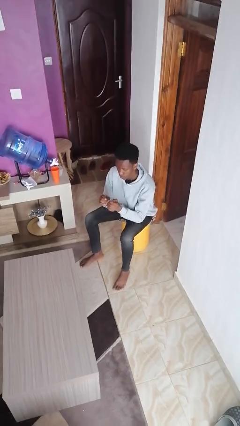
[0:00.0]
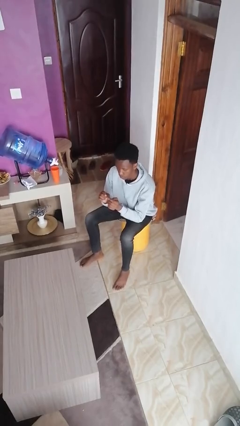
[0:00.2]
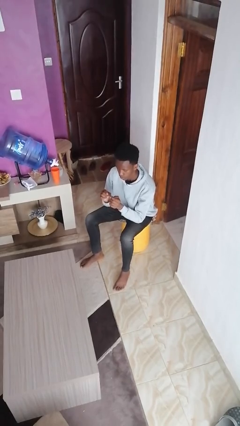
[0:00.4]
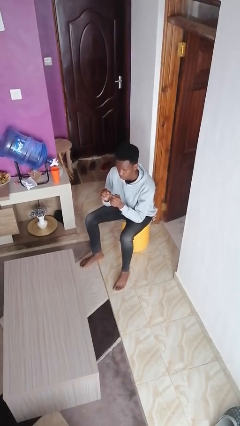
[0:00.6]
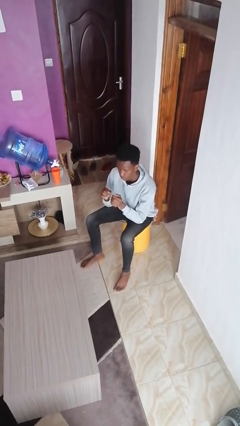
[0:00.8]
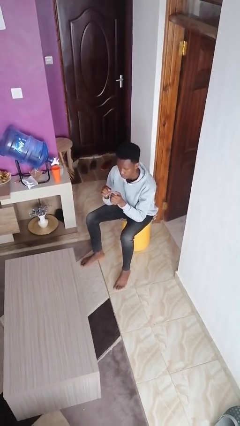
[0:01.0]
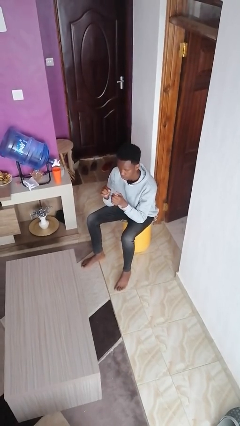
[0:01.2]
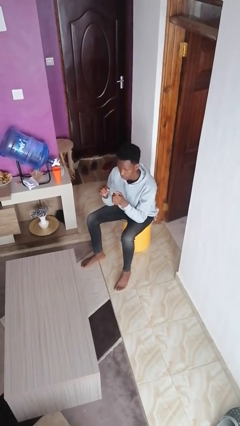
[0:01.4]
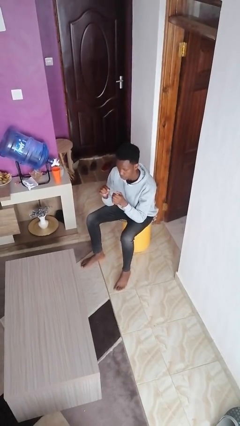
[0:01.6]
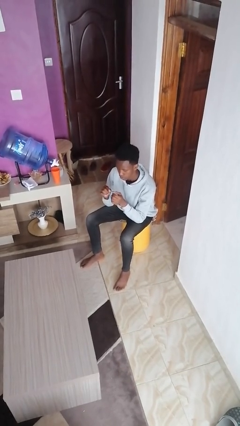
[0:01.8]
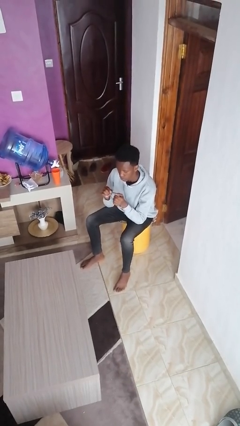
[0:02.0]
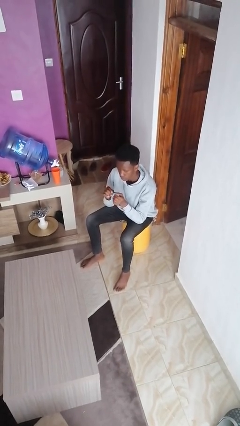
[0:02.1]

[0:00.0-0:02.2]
person files fingernails

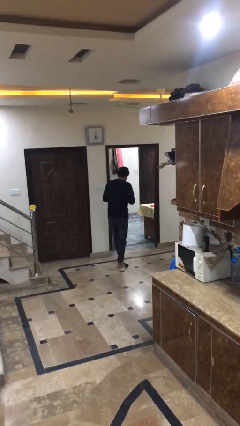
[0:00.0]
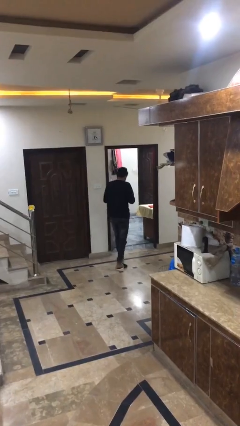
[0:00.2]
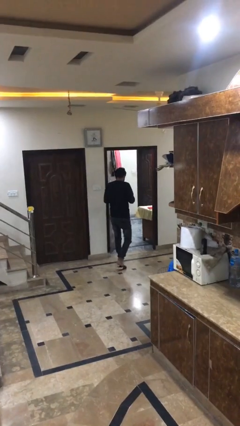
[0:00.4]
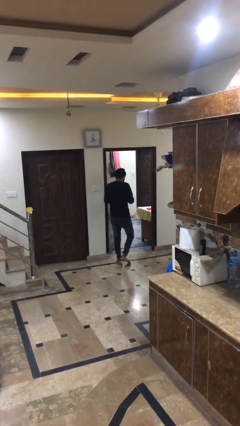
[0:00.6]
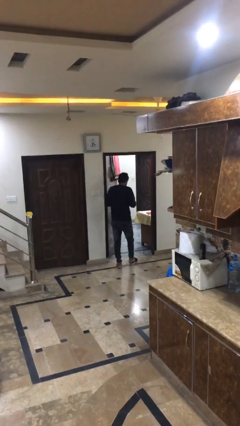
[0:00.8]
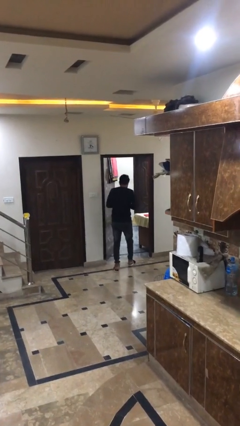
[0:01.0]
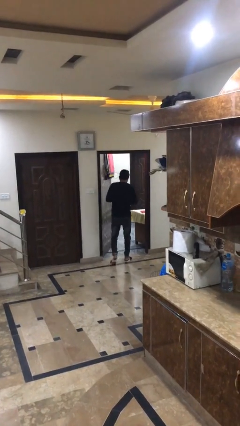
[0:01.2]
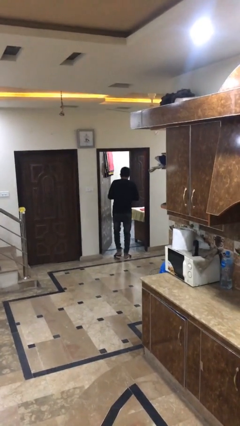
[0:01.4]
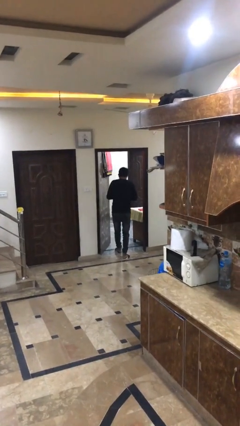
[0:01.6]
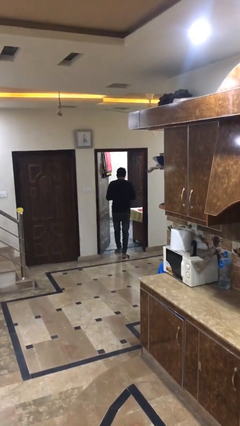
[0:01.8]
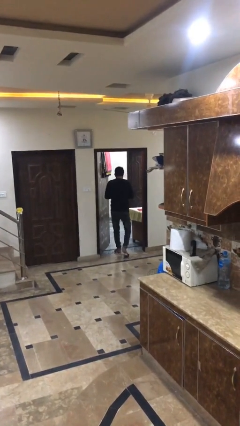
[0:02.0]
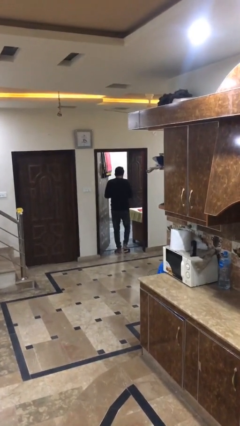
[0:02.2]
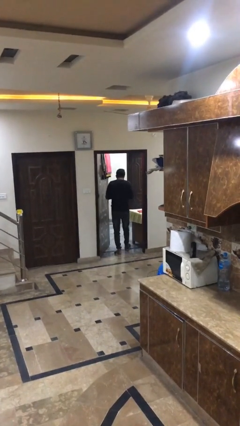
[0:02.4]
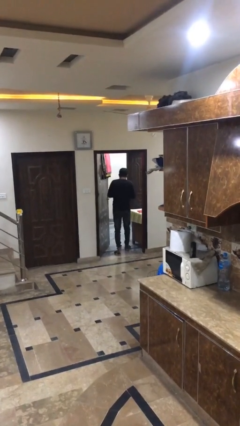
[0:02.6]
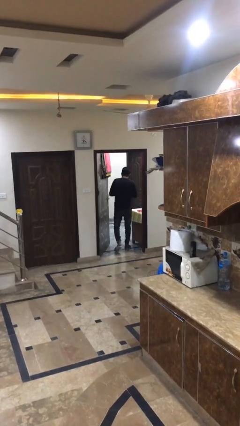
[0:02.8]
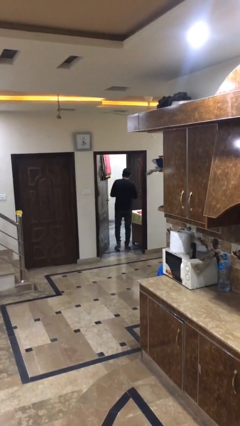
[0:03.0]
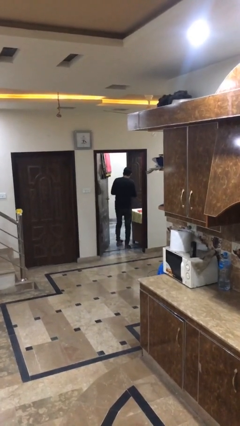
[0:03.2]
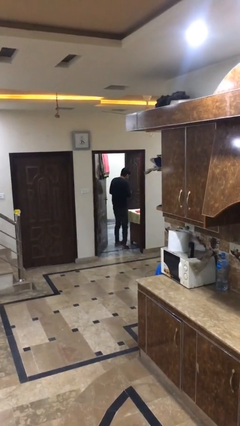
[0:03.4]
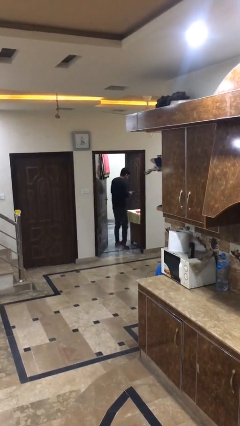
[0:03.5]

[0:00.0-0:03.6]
person enters scene through structure

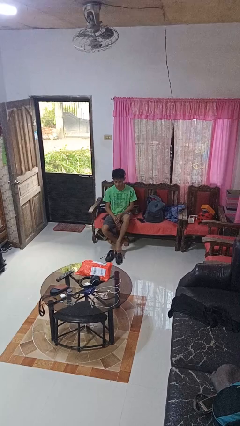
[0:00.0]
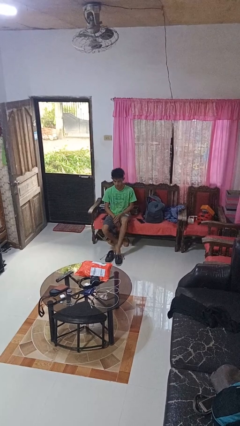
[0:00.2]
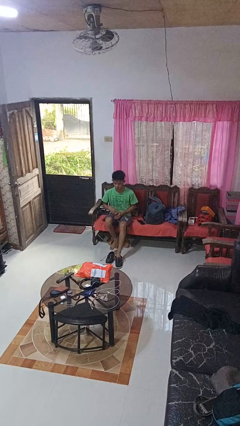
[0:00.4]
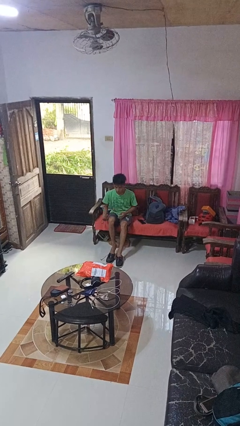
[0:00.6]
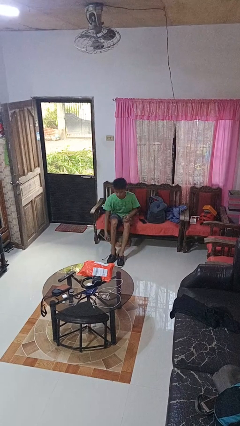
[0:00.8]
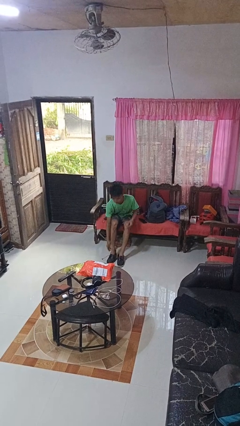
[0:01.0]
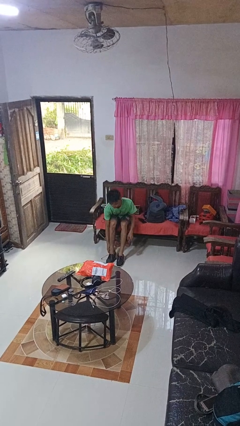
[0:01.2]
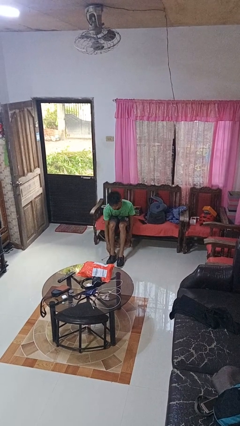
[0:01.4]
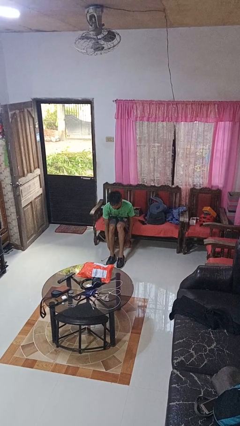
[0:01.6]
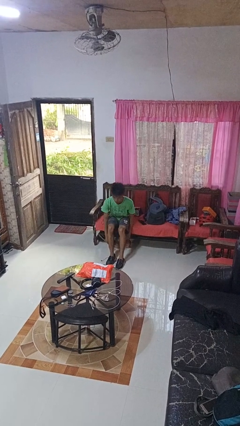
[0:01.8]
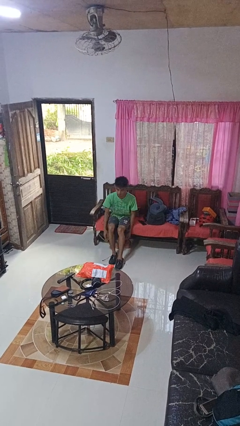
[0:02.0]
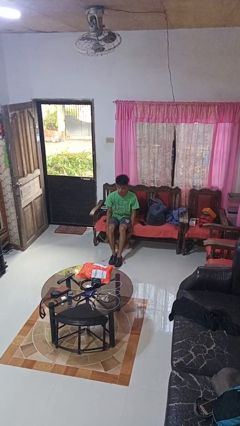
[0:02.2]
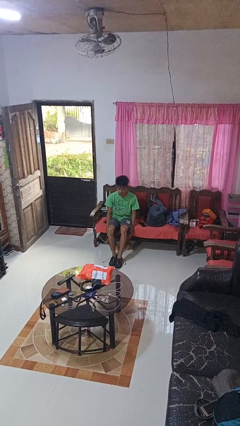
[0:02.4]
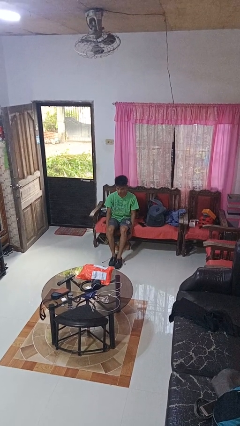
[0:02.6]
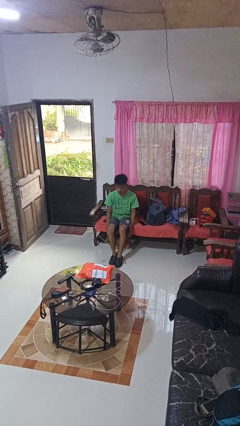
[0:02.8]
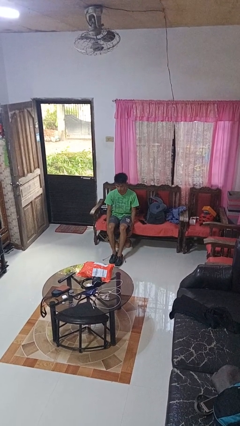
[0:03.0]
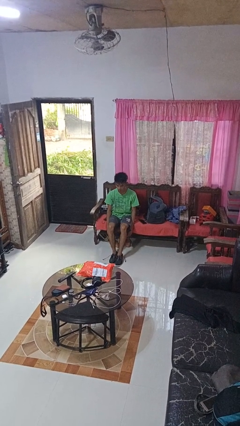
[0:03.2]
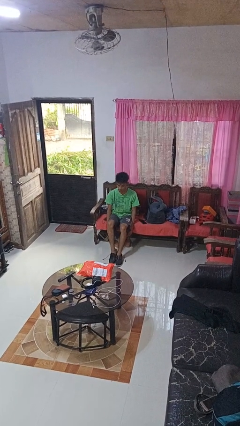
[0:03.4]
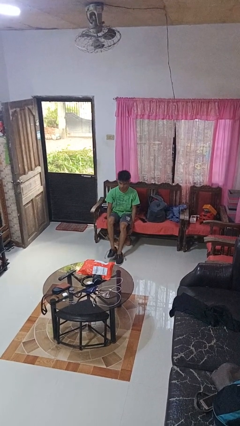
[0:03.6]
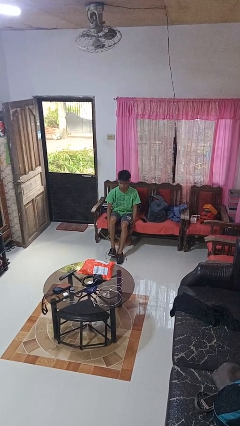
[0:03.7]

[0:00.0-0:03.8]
person puts on shoes

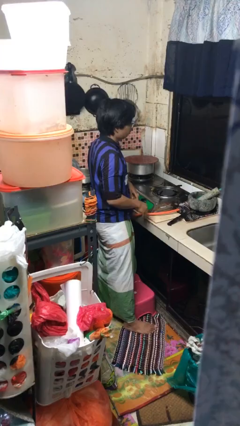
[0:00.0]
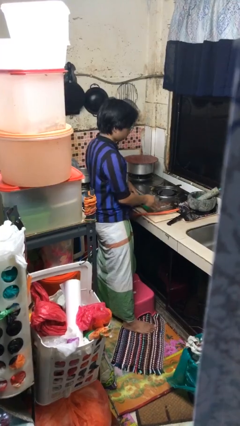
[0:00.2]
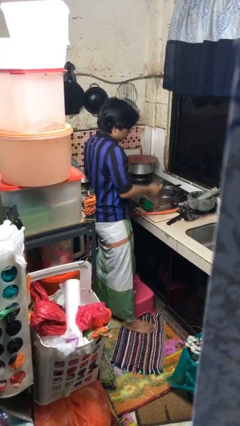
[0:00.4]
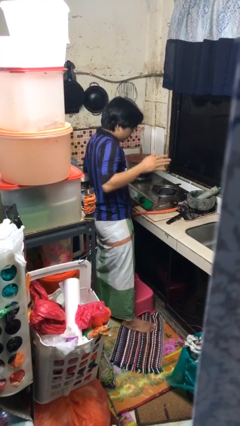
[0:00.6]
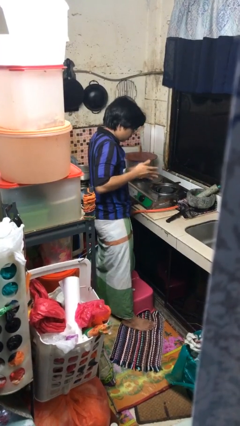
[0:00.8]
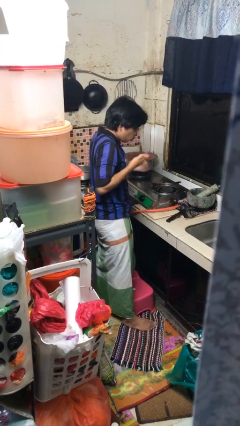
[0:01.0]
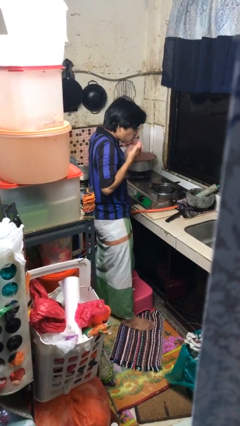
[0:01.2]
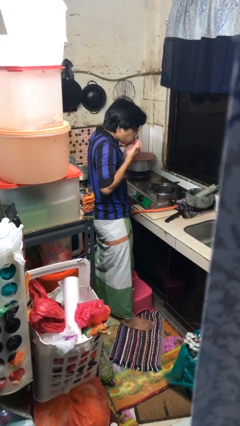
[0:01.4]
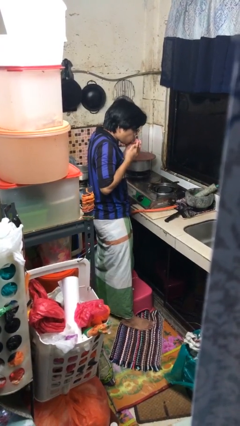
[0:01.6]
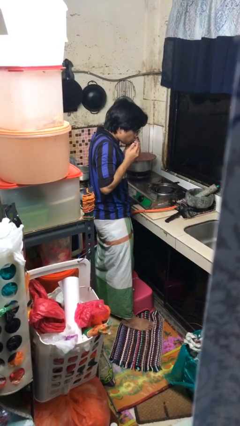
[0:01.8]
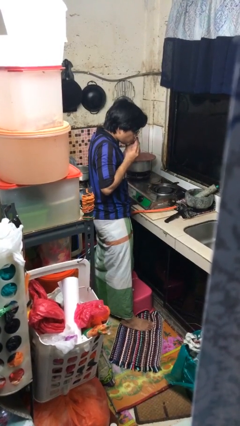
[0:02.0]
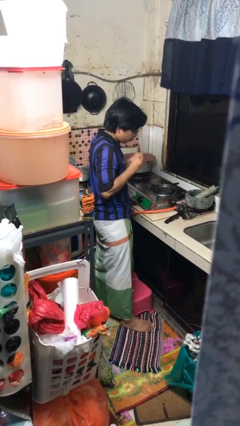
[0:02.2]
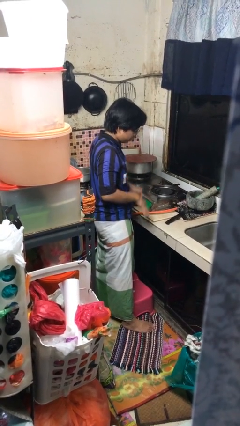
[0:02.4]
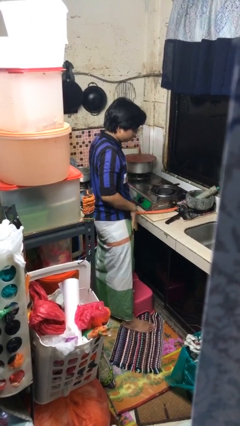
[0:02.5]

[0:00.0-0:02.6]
person burns hand

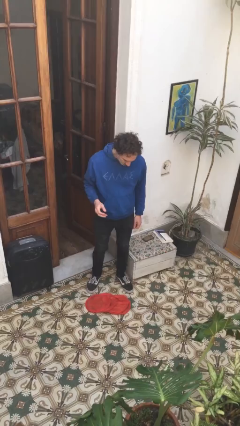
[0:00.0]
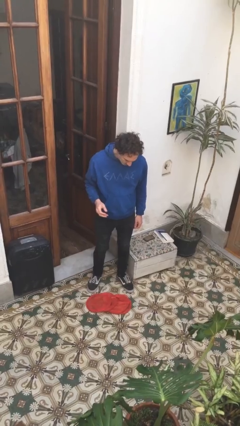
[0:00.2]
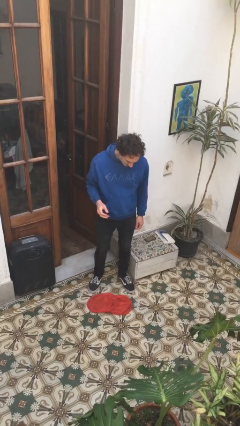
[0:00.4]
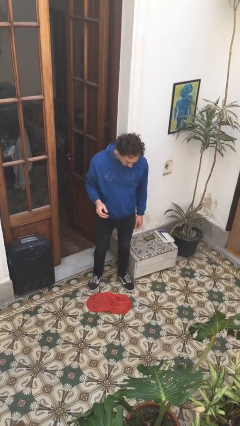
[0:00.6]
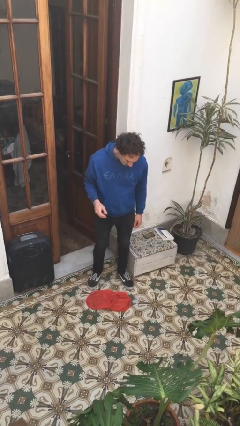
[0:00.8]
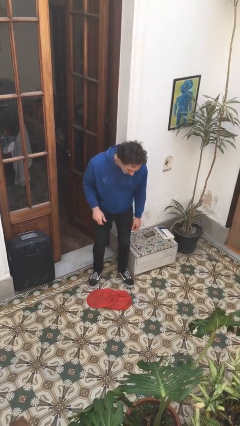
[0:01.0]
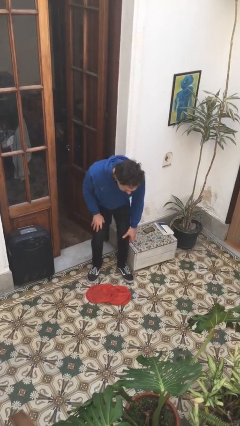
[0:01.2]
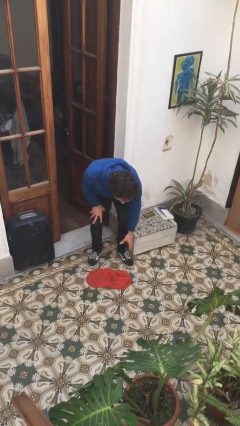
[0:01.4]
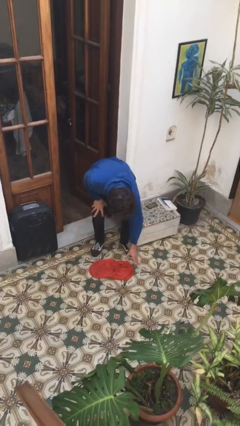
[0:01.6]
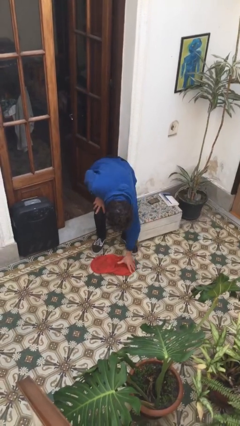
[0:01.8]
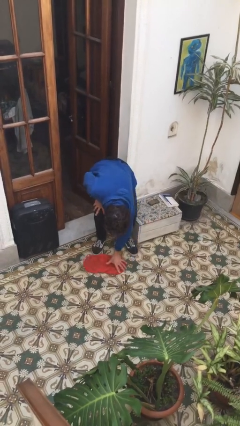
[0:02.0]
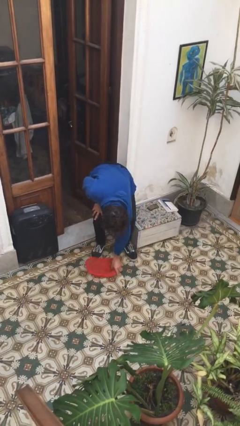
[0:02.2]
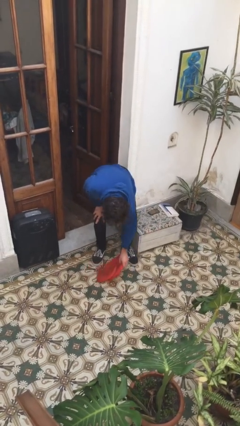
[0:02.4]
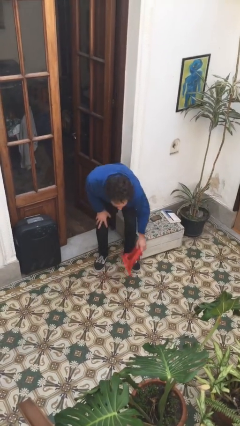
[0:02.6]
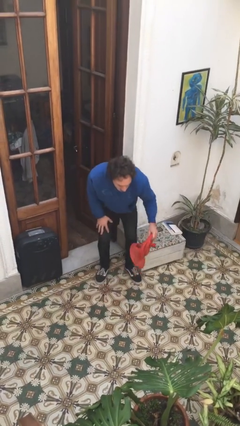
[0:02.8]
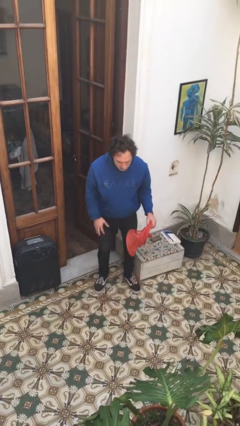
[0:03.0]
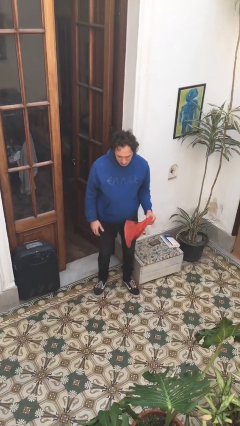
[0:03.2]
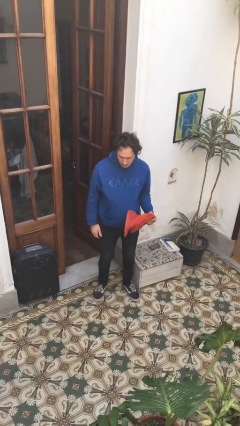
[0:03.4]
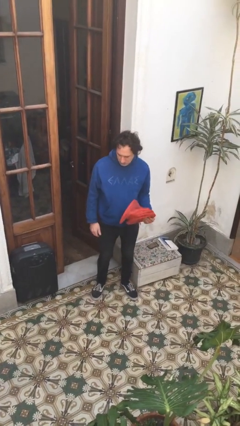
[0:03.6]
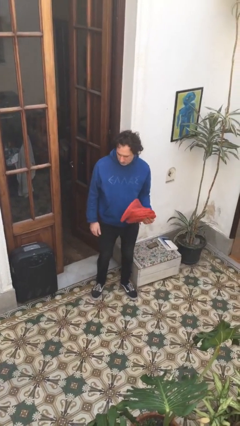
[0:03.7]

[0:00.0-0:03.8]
person picks up object from floor

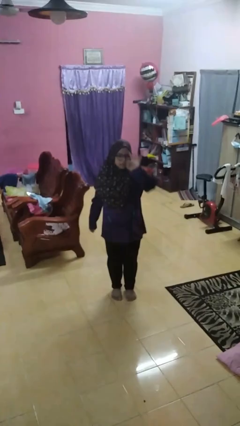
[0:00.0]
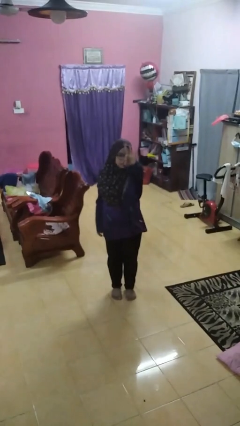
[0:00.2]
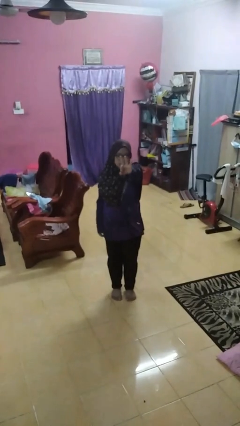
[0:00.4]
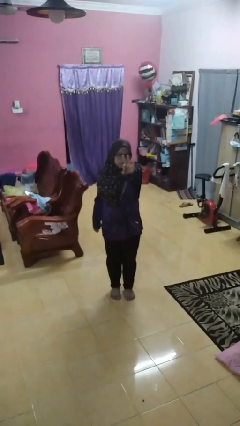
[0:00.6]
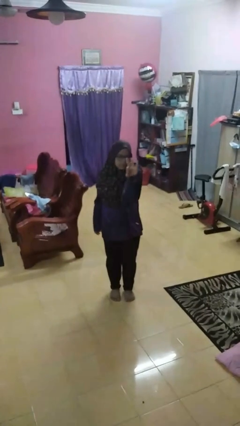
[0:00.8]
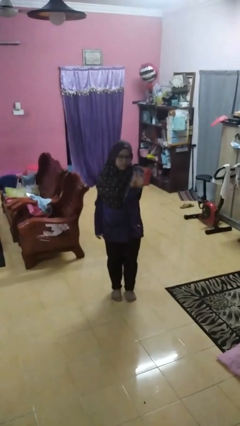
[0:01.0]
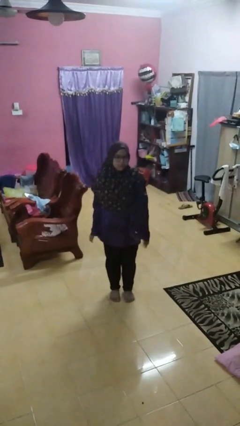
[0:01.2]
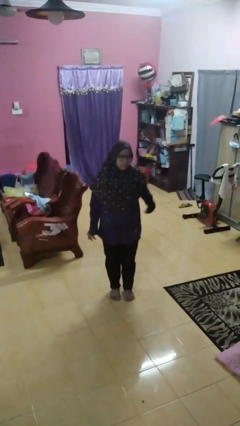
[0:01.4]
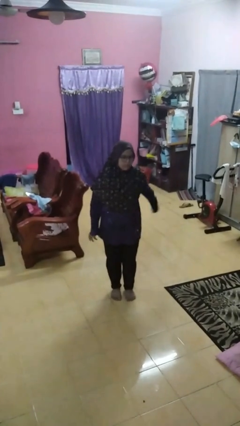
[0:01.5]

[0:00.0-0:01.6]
person gestures number three
